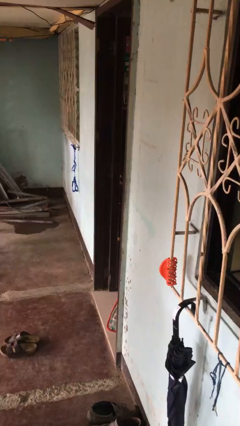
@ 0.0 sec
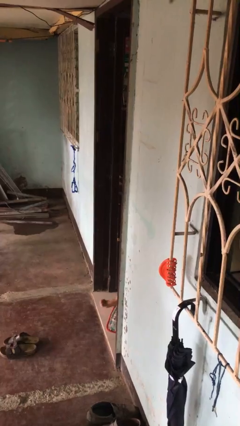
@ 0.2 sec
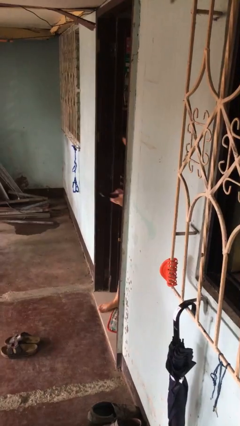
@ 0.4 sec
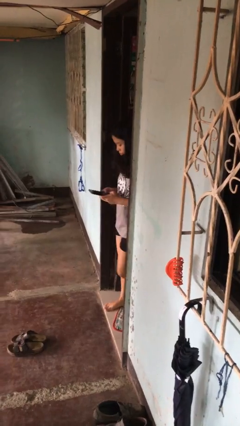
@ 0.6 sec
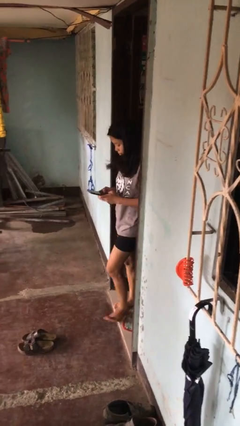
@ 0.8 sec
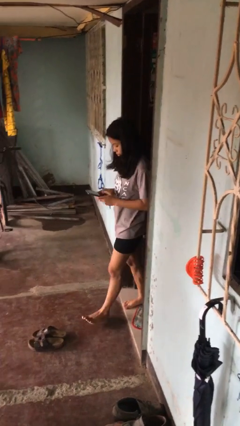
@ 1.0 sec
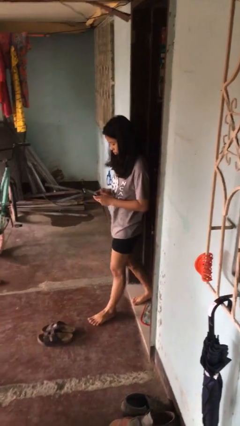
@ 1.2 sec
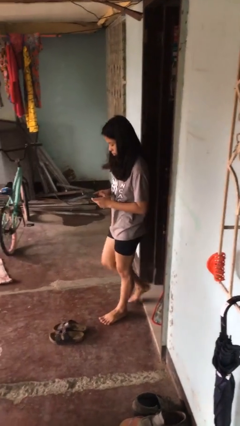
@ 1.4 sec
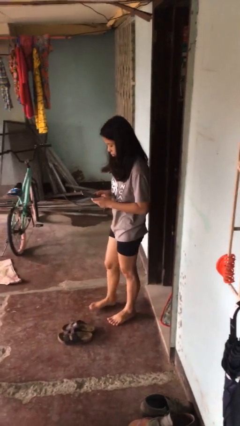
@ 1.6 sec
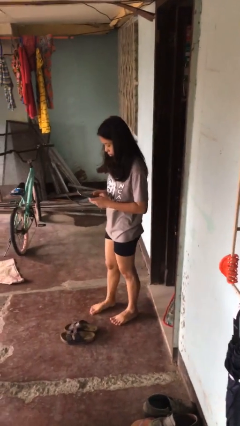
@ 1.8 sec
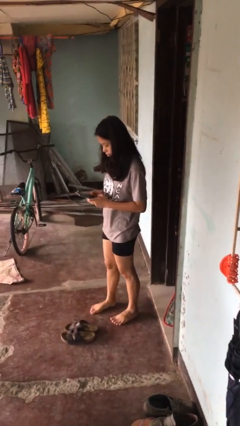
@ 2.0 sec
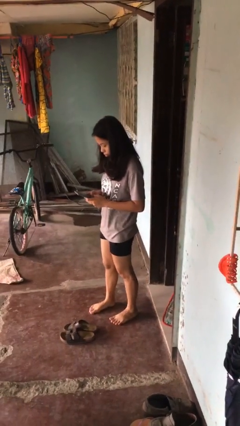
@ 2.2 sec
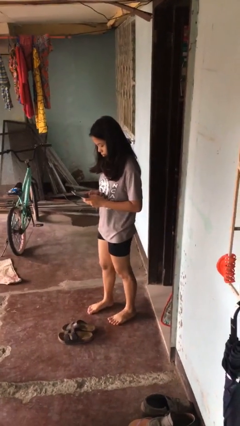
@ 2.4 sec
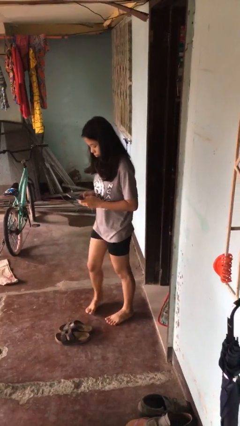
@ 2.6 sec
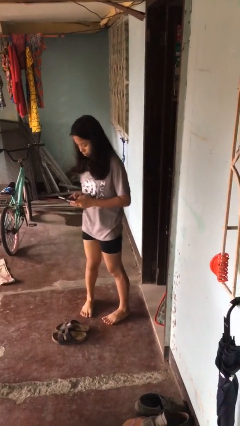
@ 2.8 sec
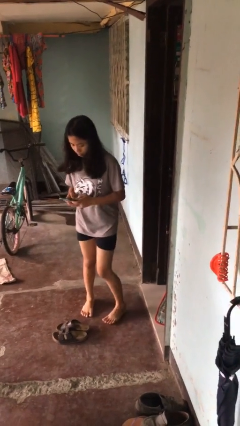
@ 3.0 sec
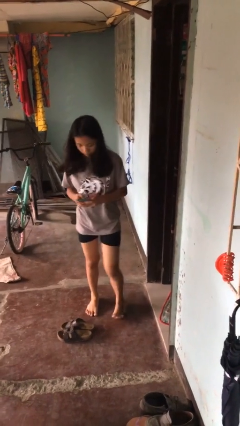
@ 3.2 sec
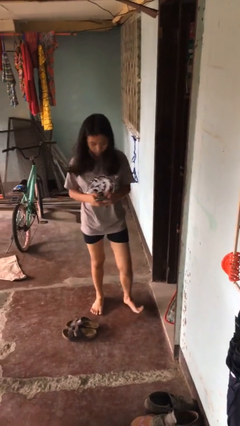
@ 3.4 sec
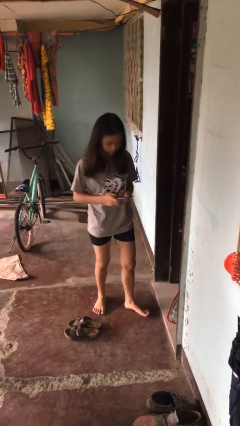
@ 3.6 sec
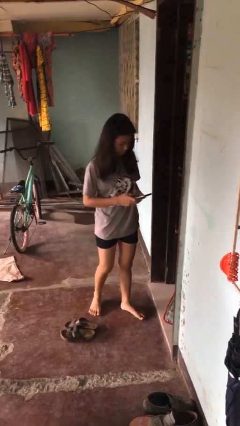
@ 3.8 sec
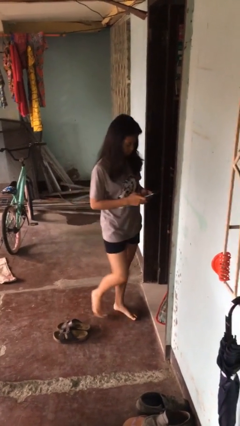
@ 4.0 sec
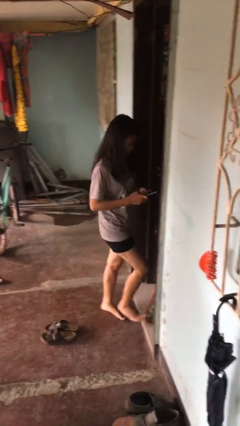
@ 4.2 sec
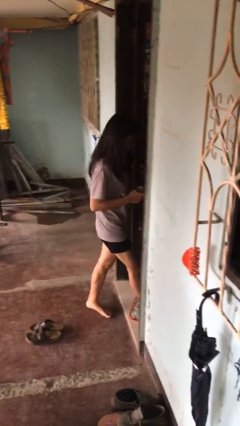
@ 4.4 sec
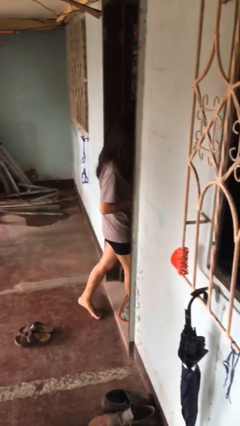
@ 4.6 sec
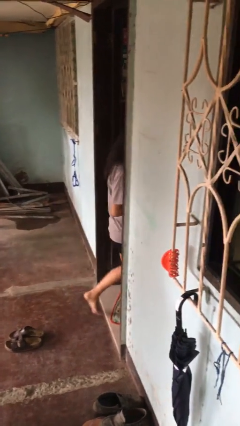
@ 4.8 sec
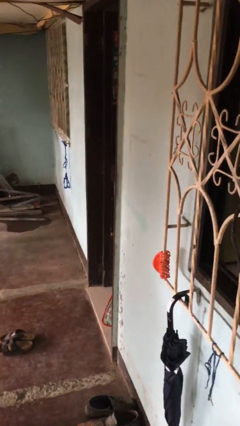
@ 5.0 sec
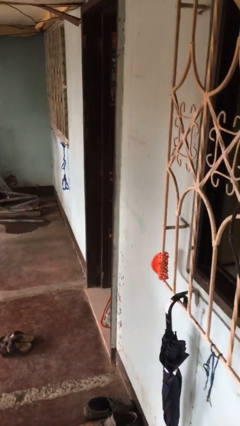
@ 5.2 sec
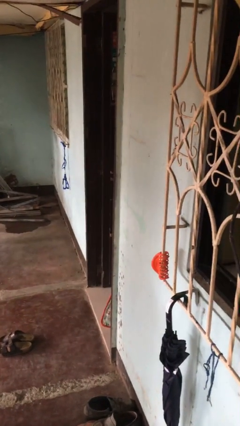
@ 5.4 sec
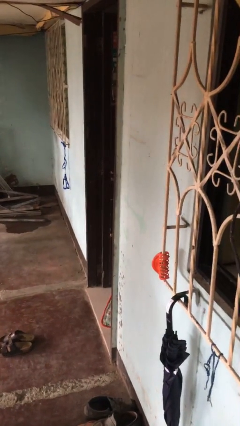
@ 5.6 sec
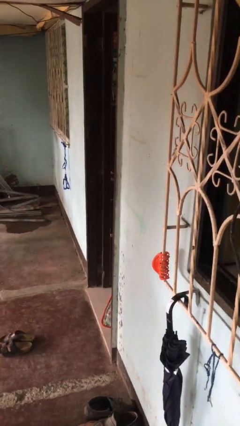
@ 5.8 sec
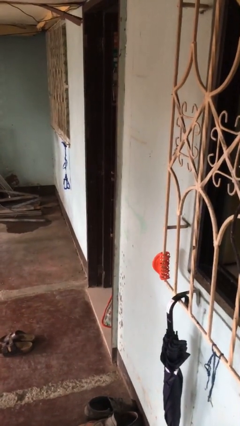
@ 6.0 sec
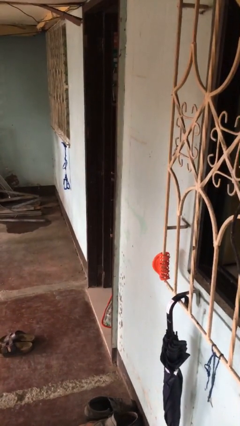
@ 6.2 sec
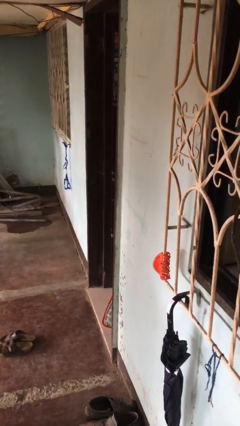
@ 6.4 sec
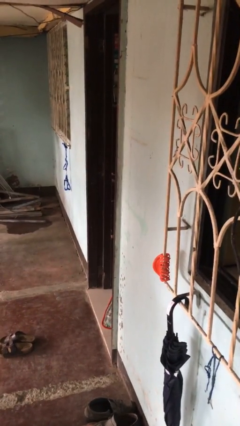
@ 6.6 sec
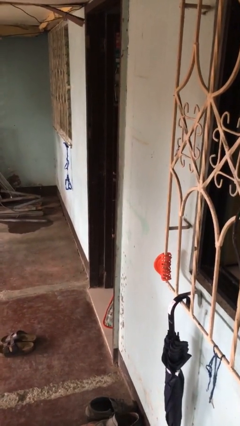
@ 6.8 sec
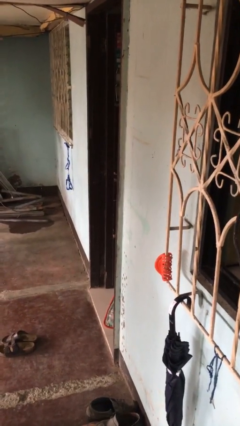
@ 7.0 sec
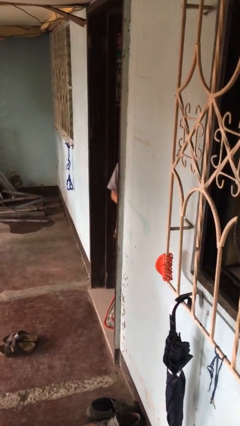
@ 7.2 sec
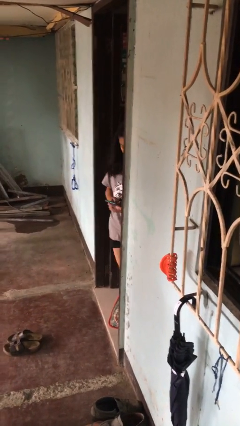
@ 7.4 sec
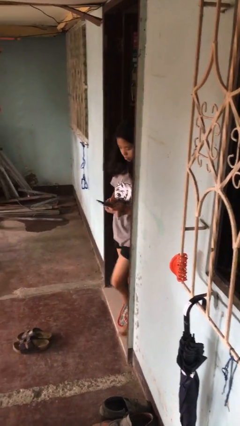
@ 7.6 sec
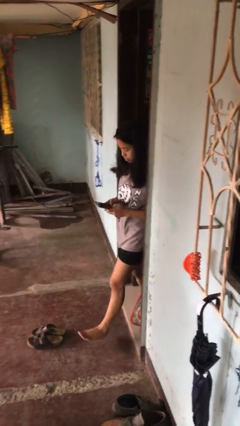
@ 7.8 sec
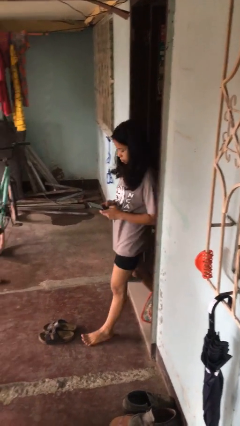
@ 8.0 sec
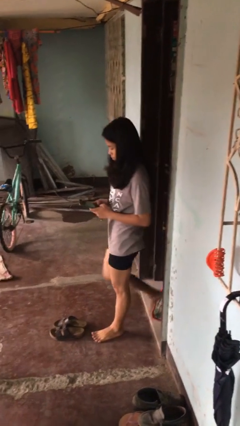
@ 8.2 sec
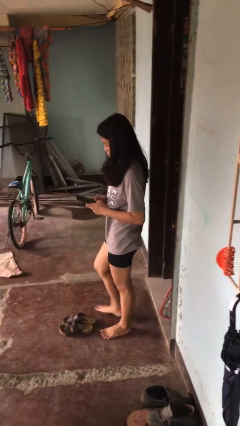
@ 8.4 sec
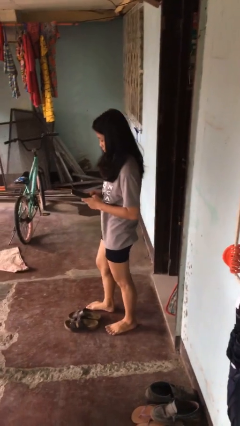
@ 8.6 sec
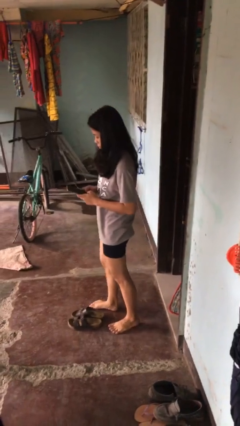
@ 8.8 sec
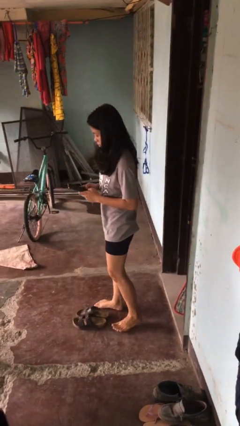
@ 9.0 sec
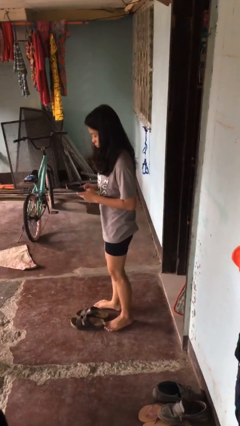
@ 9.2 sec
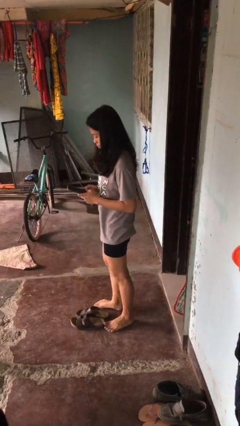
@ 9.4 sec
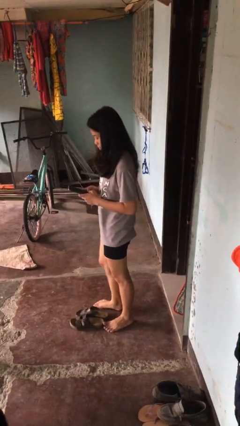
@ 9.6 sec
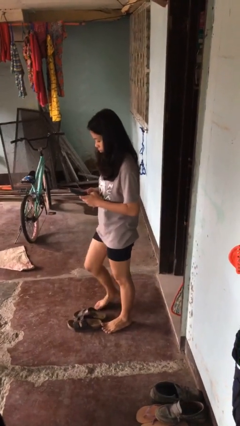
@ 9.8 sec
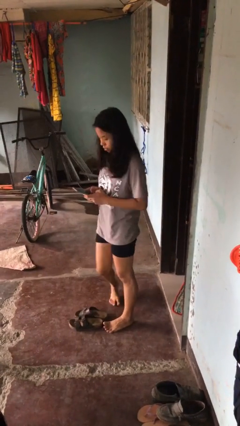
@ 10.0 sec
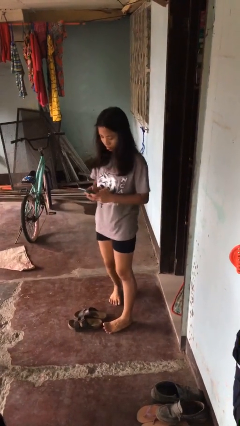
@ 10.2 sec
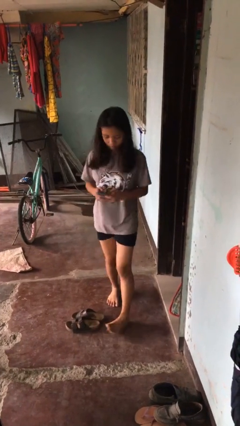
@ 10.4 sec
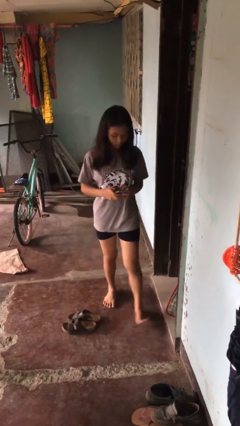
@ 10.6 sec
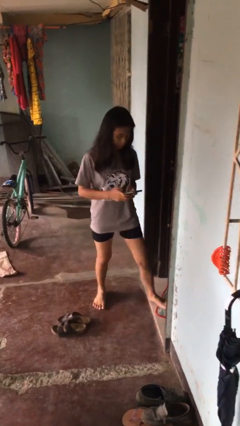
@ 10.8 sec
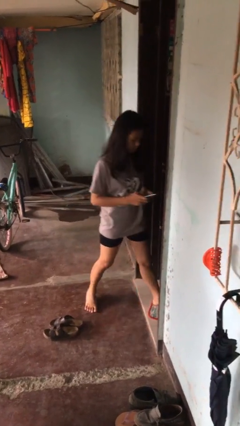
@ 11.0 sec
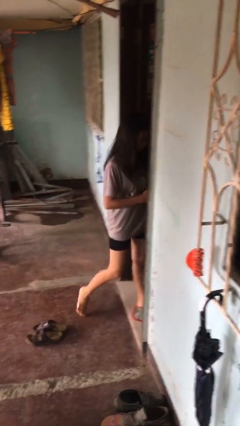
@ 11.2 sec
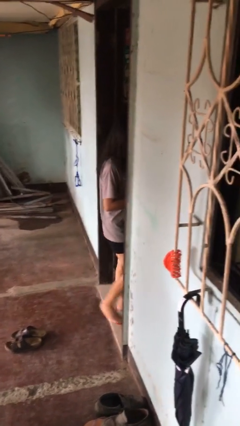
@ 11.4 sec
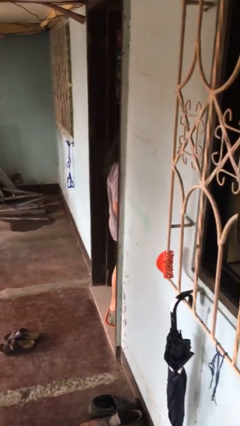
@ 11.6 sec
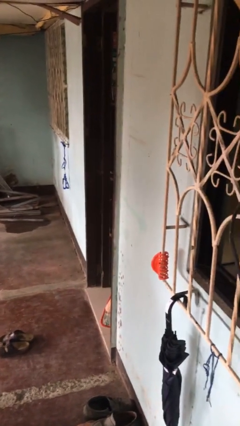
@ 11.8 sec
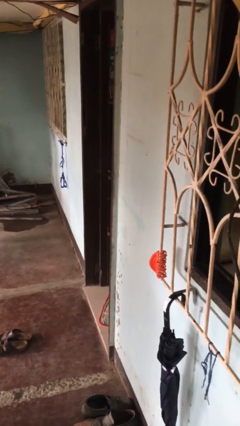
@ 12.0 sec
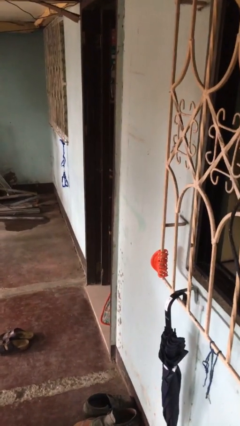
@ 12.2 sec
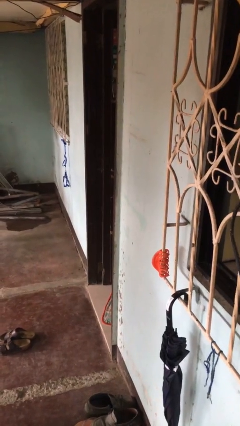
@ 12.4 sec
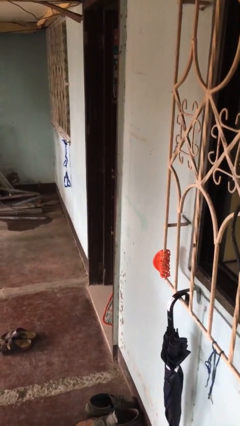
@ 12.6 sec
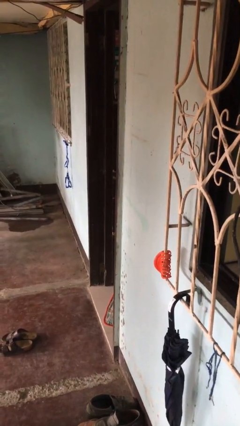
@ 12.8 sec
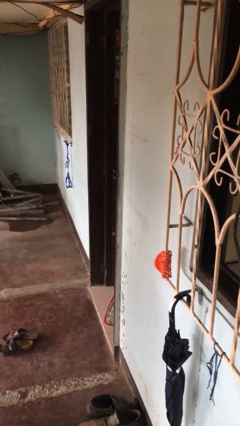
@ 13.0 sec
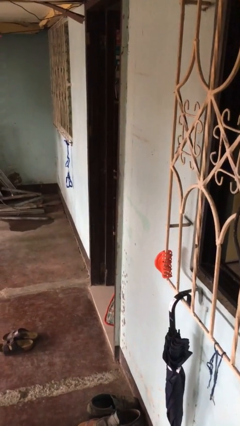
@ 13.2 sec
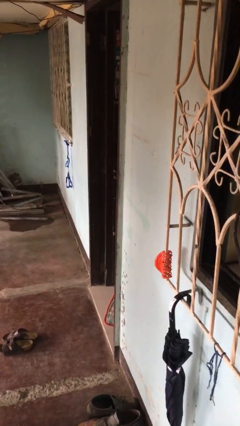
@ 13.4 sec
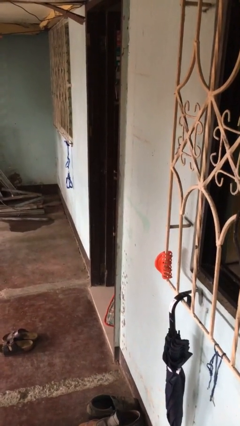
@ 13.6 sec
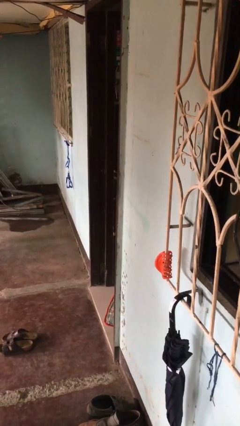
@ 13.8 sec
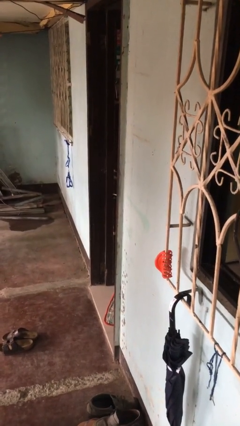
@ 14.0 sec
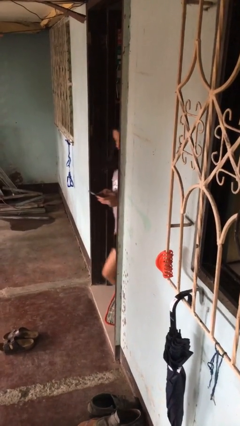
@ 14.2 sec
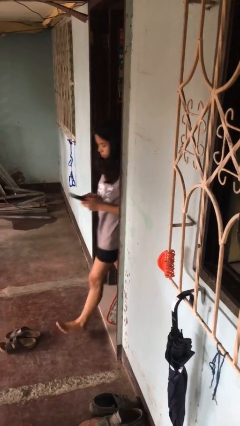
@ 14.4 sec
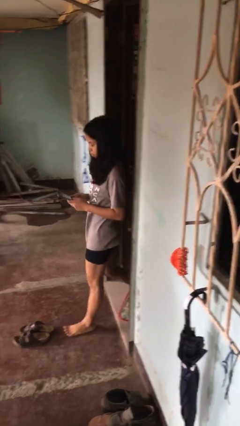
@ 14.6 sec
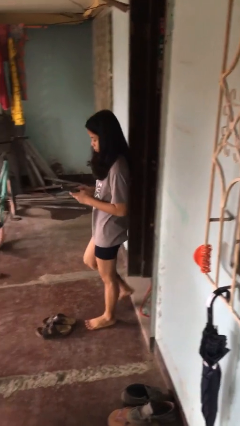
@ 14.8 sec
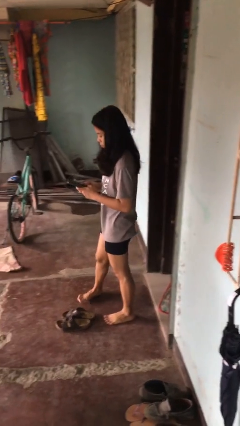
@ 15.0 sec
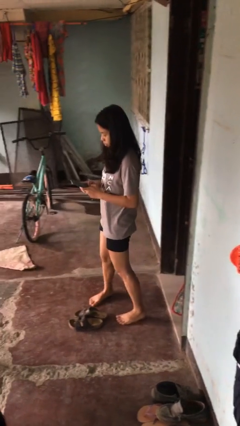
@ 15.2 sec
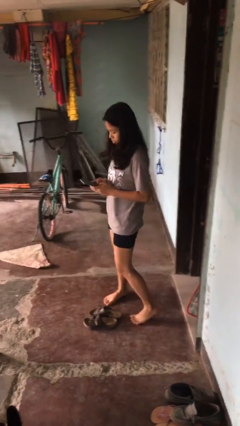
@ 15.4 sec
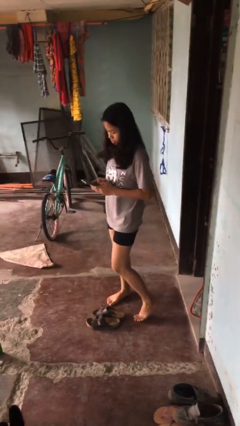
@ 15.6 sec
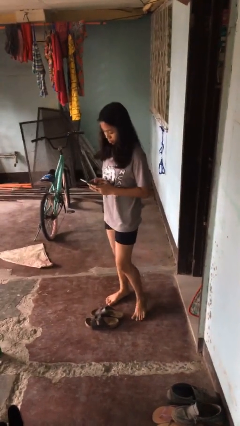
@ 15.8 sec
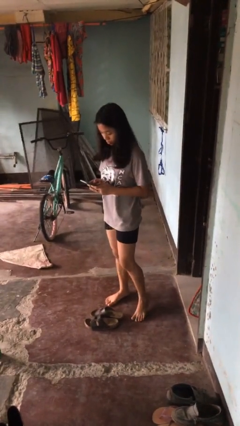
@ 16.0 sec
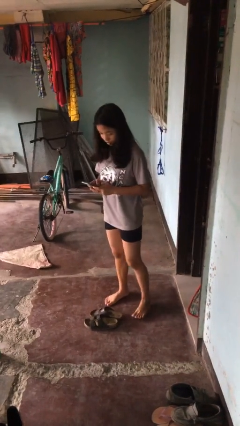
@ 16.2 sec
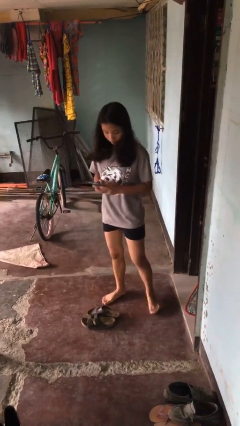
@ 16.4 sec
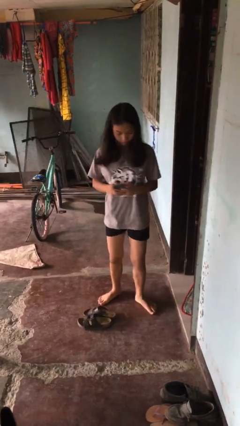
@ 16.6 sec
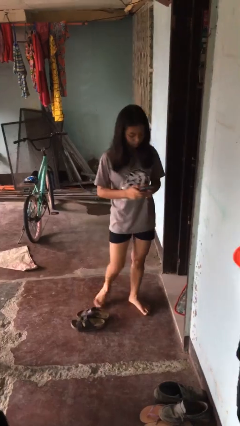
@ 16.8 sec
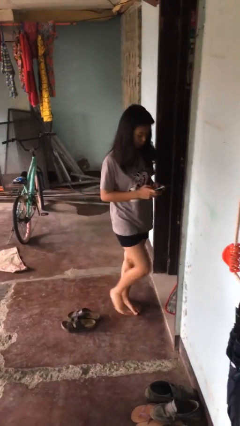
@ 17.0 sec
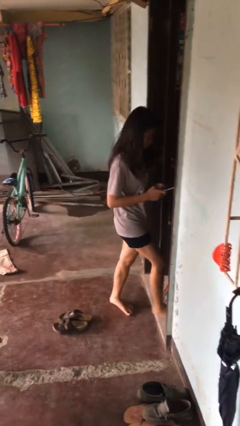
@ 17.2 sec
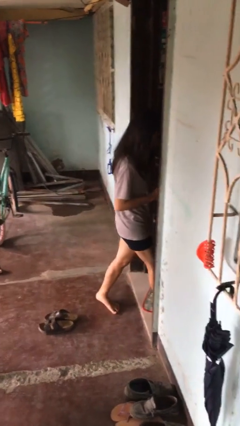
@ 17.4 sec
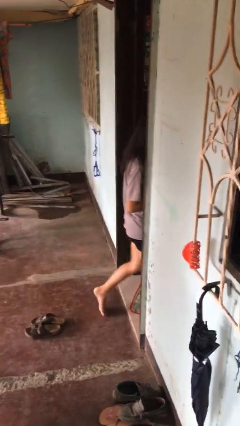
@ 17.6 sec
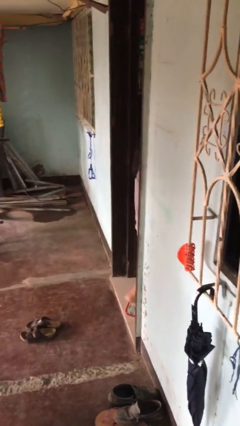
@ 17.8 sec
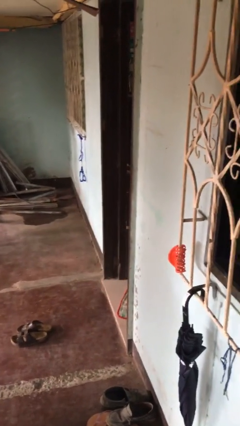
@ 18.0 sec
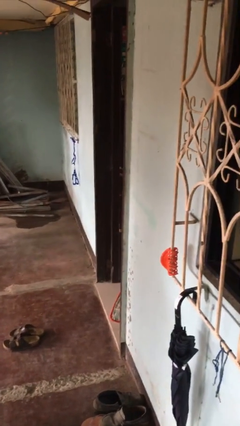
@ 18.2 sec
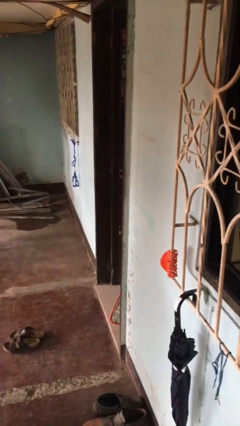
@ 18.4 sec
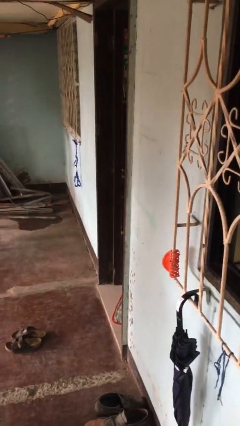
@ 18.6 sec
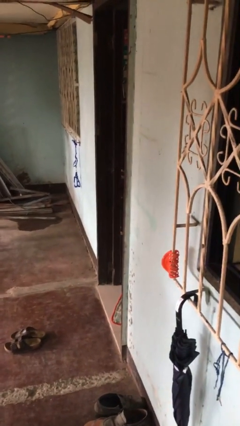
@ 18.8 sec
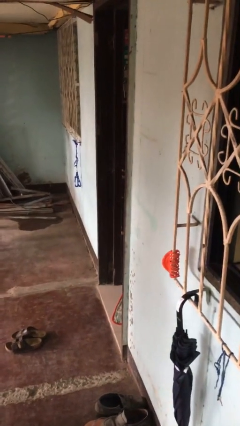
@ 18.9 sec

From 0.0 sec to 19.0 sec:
person texts on phone
